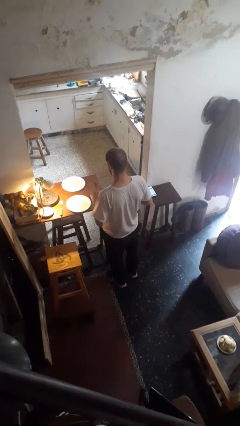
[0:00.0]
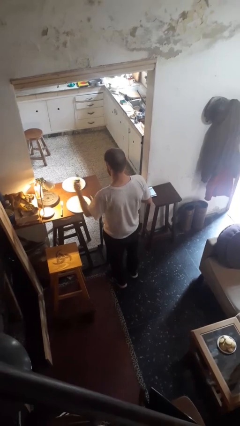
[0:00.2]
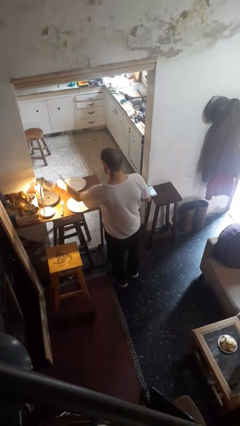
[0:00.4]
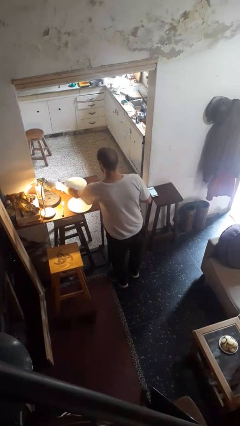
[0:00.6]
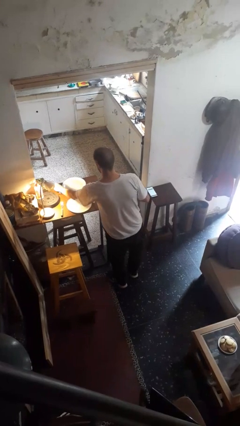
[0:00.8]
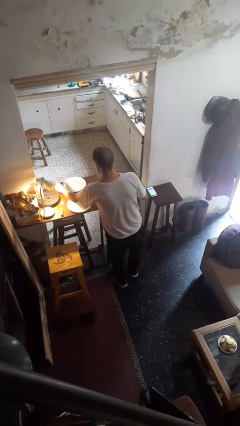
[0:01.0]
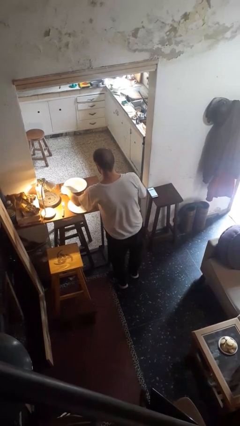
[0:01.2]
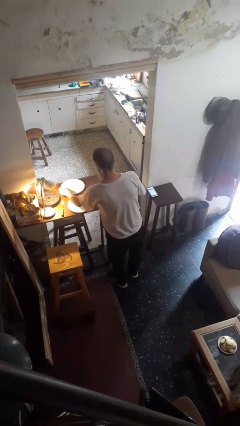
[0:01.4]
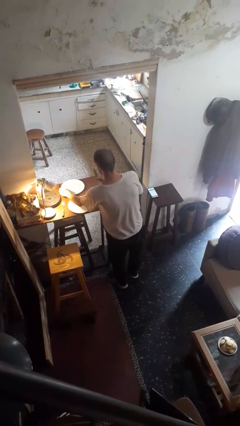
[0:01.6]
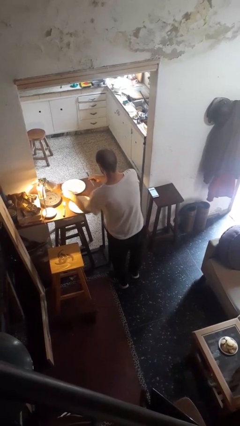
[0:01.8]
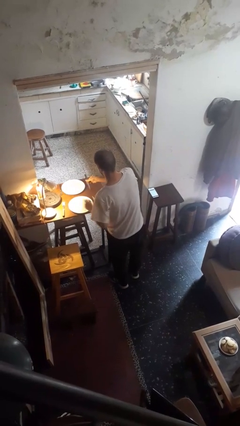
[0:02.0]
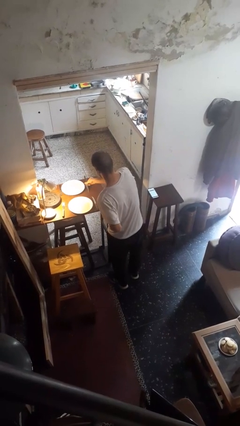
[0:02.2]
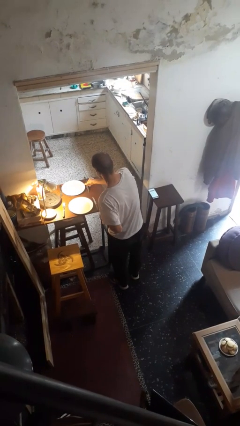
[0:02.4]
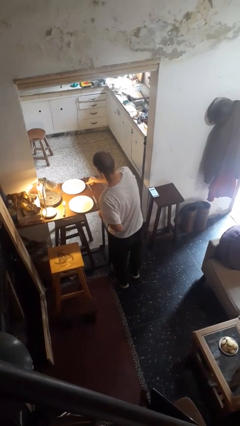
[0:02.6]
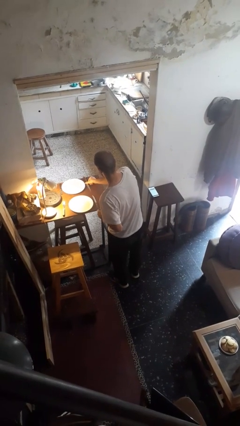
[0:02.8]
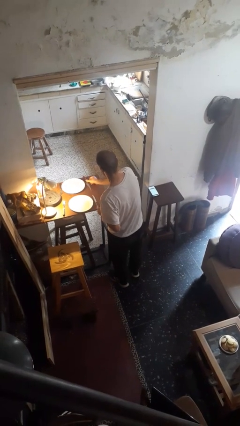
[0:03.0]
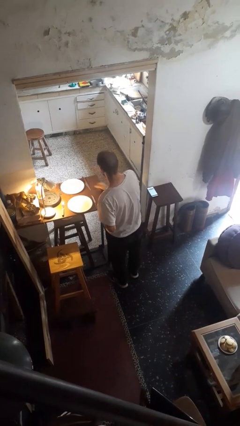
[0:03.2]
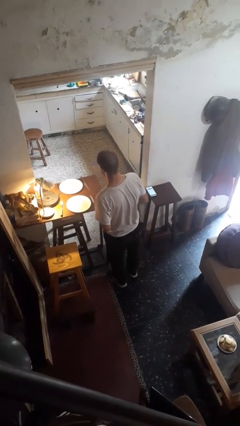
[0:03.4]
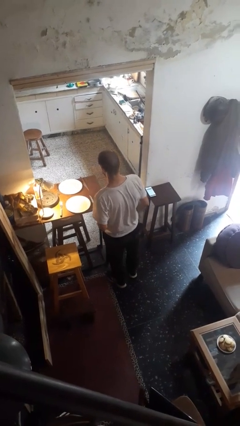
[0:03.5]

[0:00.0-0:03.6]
person sets table

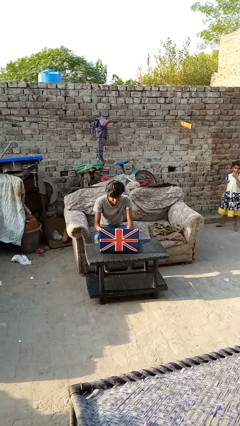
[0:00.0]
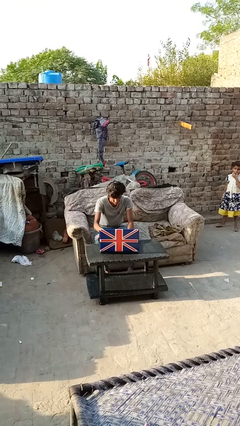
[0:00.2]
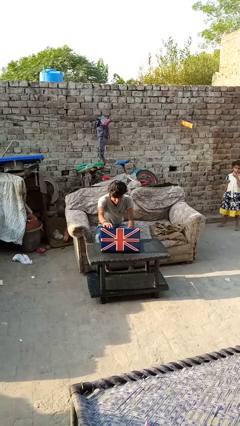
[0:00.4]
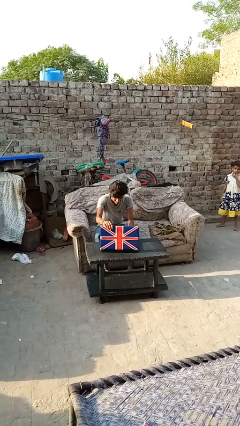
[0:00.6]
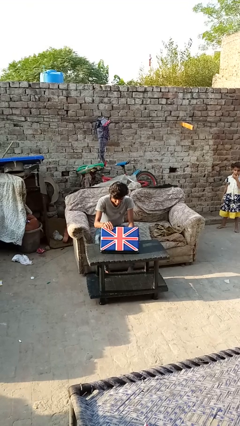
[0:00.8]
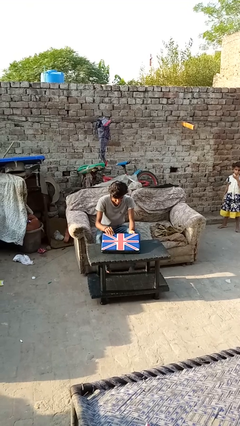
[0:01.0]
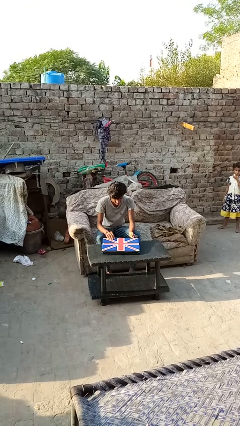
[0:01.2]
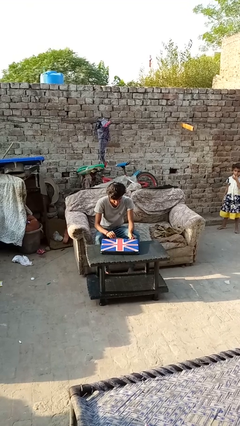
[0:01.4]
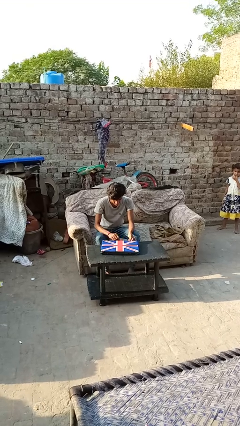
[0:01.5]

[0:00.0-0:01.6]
person closes laptop

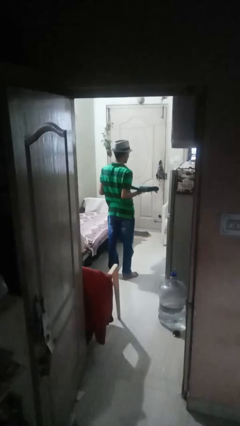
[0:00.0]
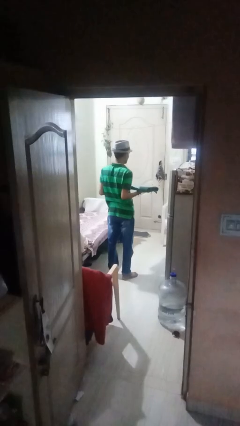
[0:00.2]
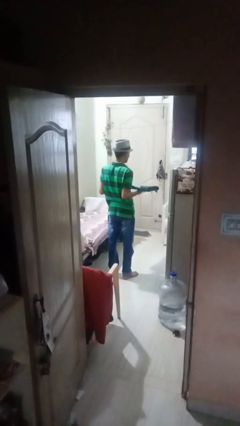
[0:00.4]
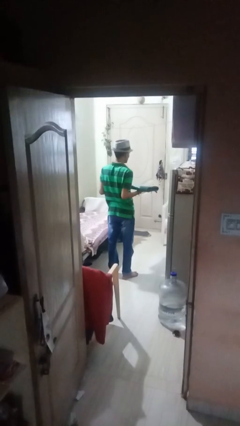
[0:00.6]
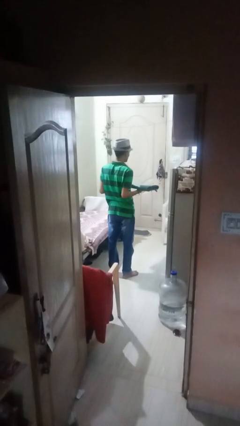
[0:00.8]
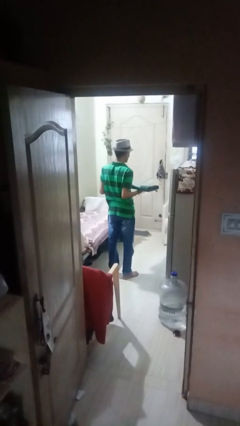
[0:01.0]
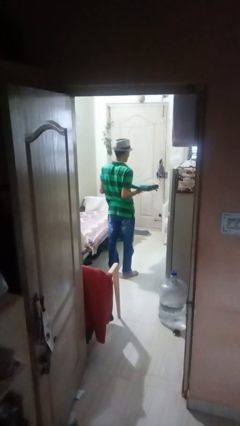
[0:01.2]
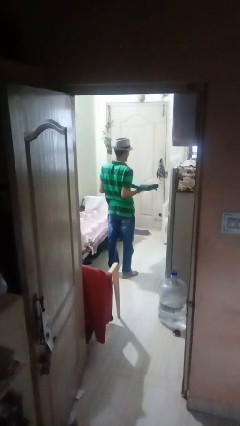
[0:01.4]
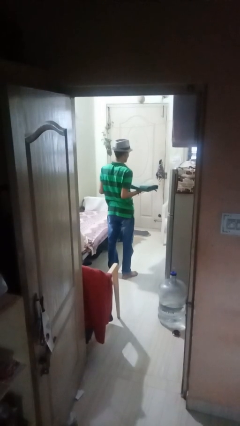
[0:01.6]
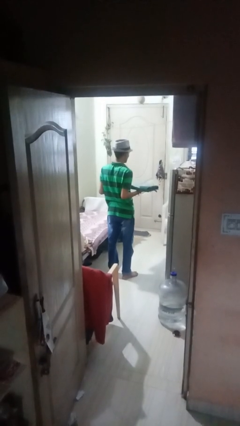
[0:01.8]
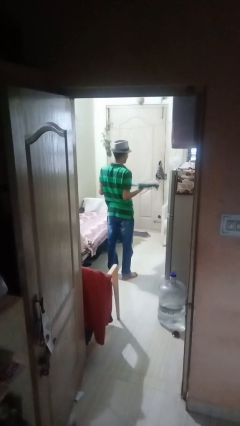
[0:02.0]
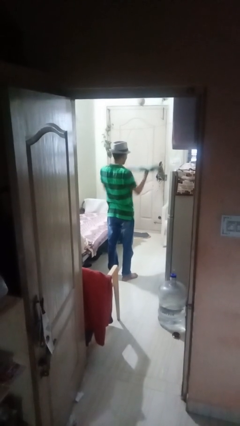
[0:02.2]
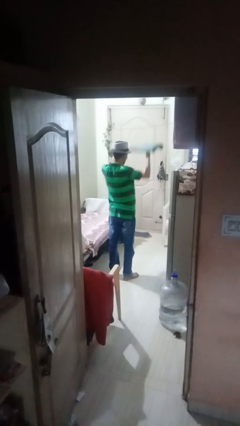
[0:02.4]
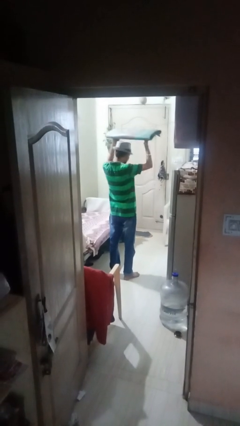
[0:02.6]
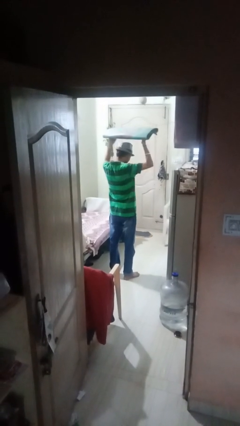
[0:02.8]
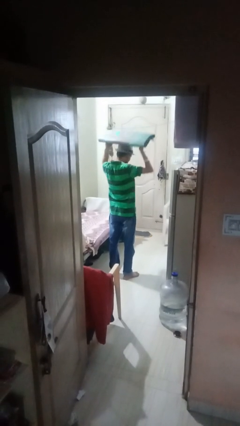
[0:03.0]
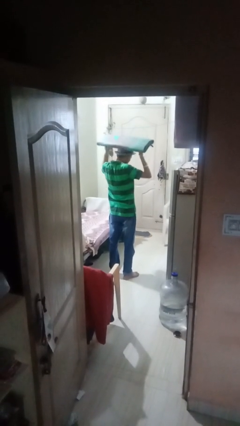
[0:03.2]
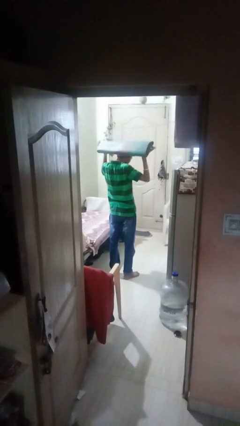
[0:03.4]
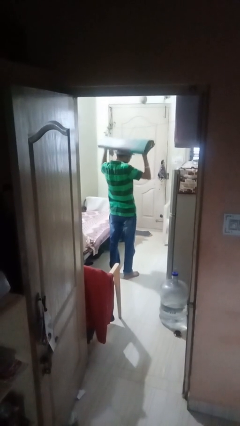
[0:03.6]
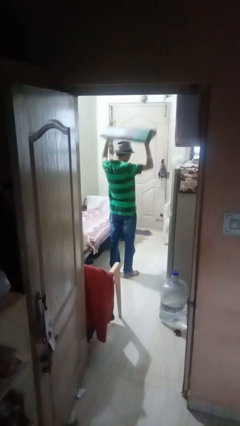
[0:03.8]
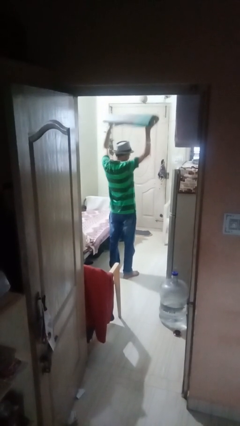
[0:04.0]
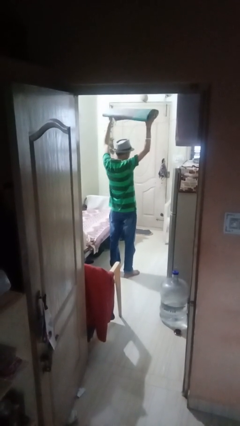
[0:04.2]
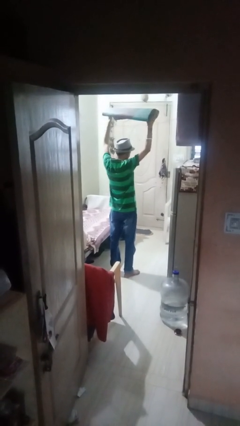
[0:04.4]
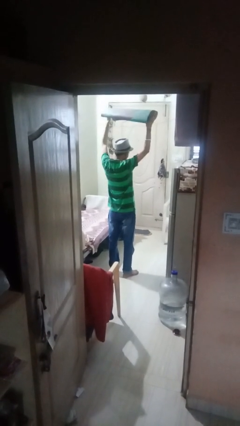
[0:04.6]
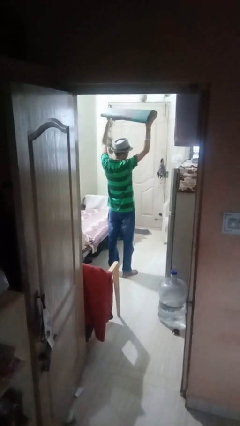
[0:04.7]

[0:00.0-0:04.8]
person holds object above head

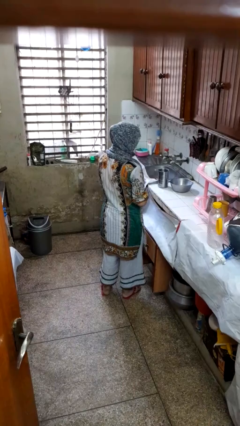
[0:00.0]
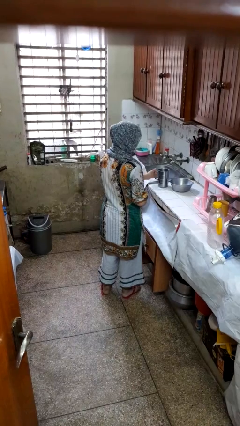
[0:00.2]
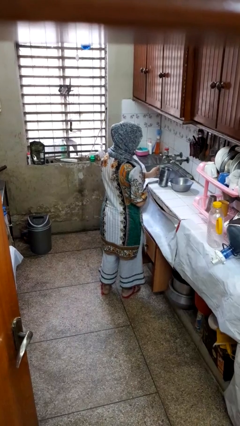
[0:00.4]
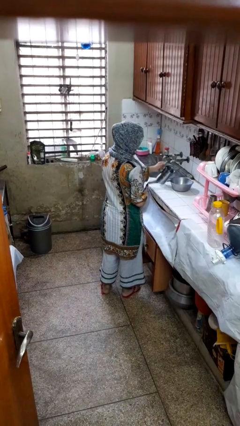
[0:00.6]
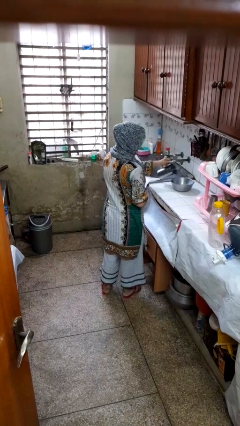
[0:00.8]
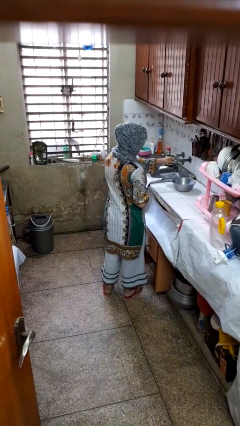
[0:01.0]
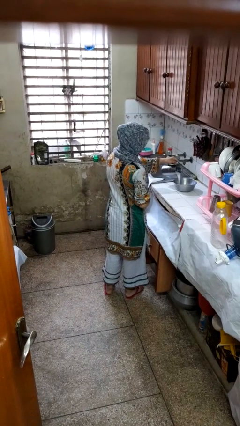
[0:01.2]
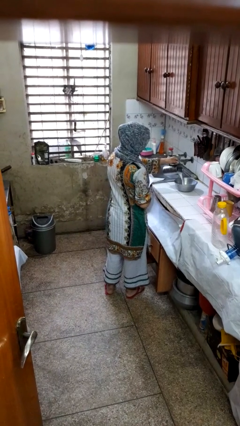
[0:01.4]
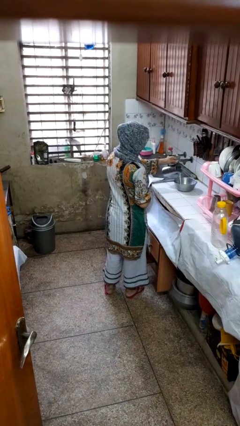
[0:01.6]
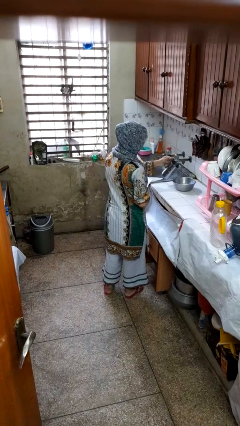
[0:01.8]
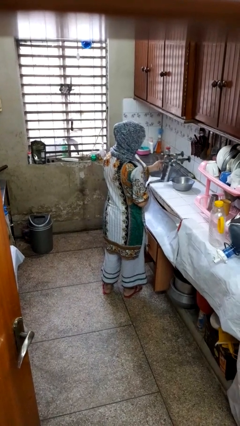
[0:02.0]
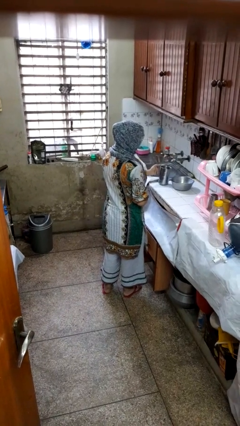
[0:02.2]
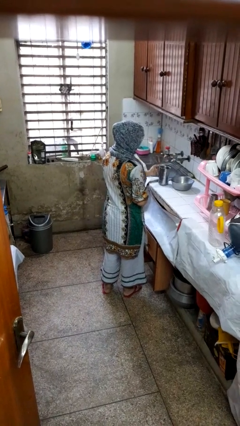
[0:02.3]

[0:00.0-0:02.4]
person pours into bowl

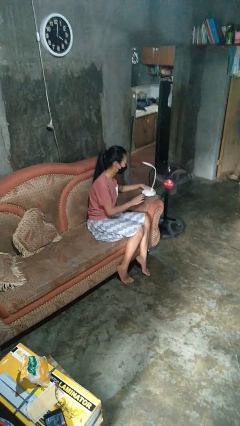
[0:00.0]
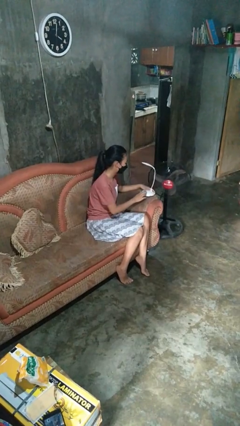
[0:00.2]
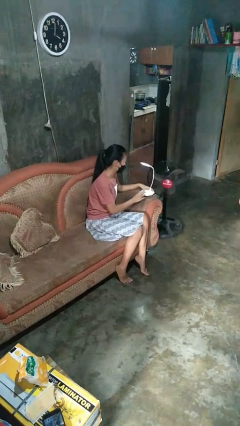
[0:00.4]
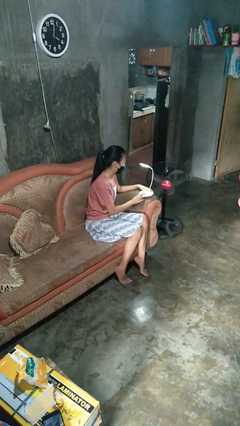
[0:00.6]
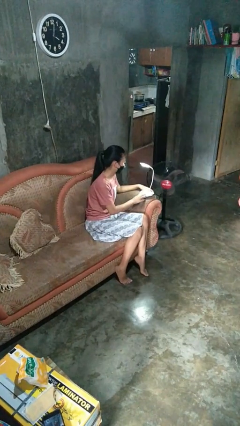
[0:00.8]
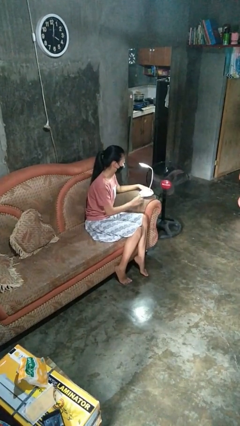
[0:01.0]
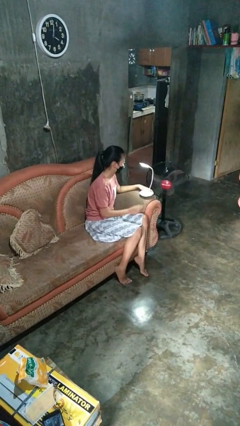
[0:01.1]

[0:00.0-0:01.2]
person turns on lamp

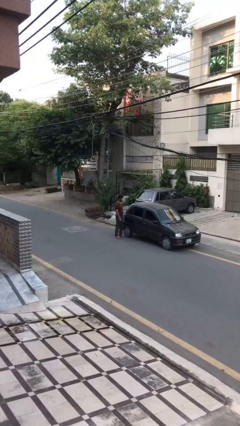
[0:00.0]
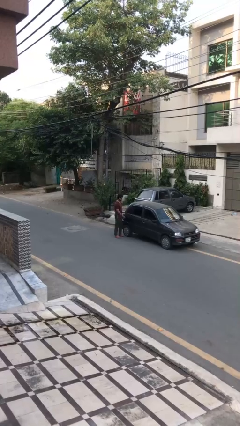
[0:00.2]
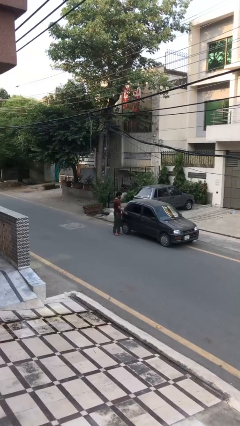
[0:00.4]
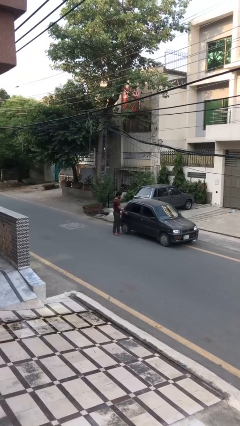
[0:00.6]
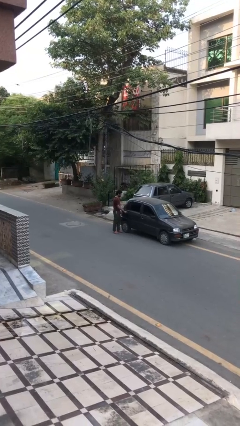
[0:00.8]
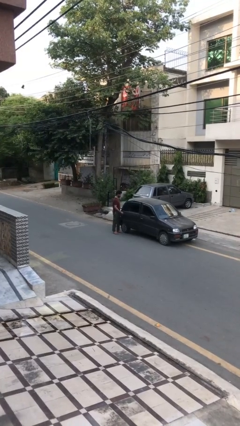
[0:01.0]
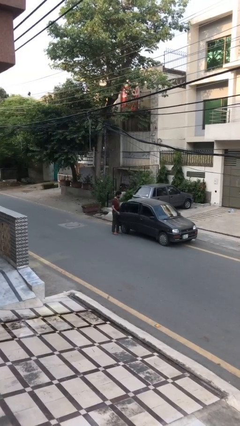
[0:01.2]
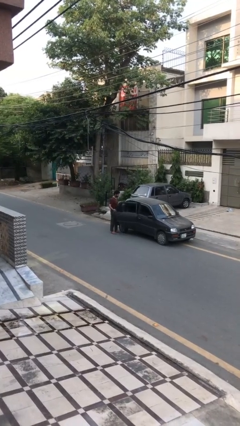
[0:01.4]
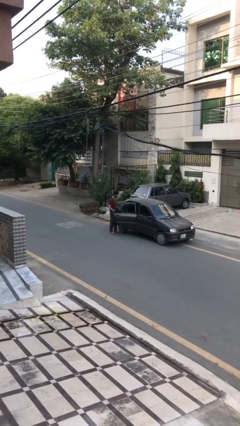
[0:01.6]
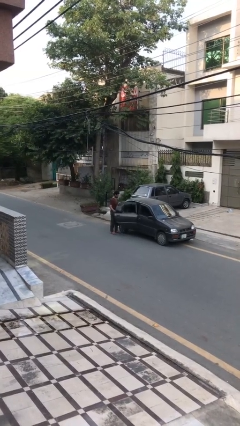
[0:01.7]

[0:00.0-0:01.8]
person opens car door

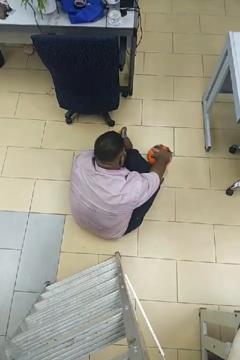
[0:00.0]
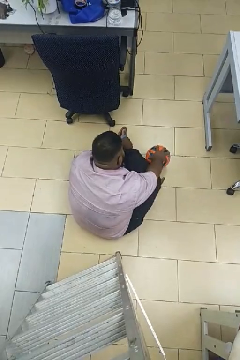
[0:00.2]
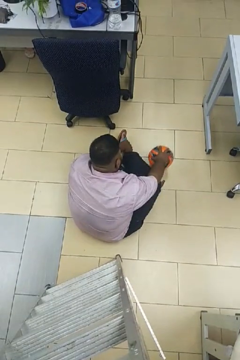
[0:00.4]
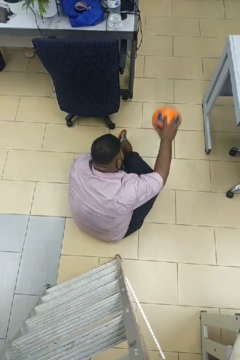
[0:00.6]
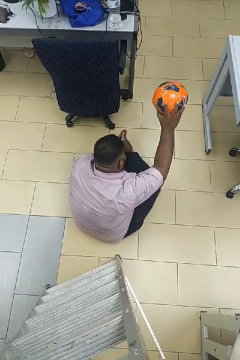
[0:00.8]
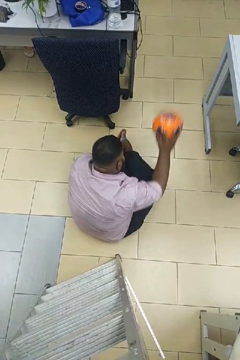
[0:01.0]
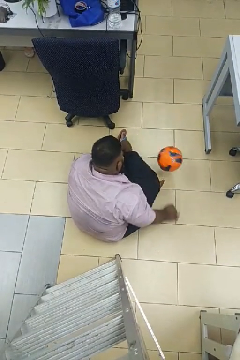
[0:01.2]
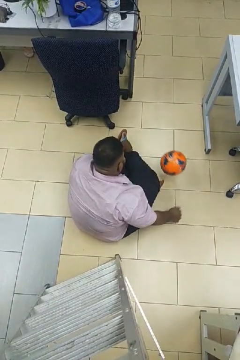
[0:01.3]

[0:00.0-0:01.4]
person bounces ball on floor
